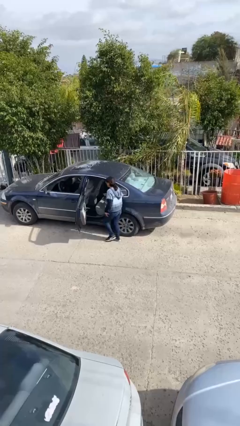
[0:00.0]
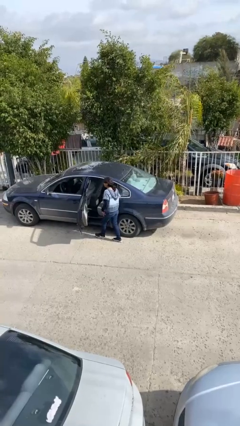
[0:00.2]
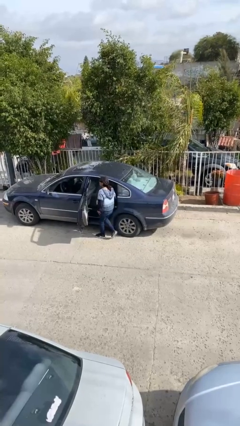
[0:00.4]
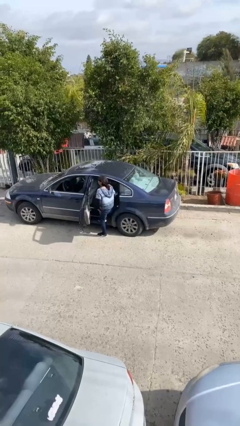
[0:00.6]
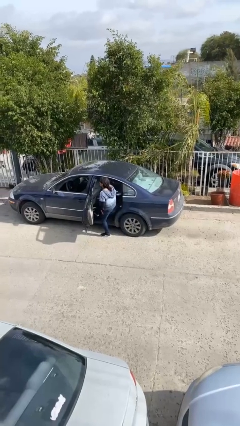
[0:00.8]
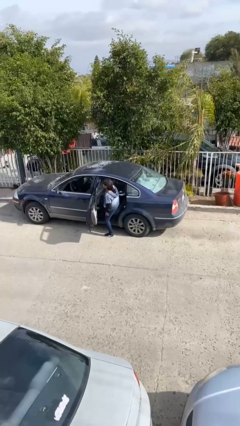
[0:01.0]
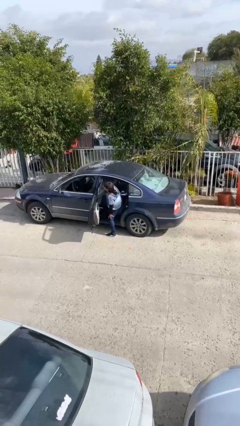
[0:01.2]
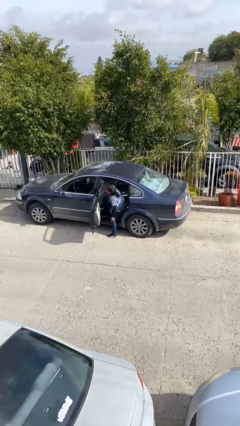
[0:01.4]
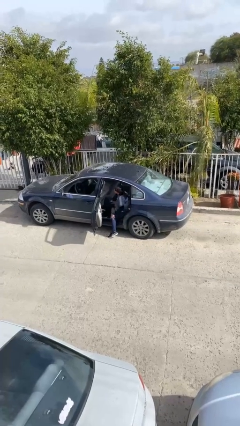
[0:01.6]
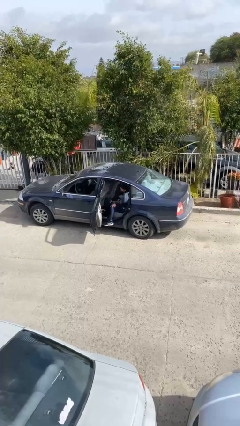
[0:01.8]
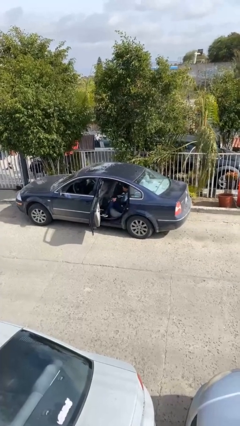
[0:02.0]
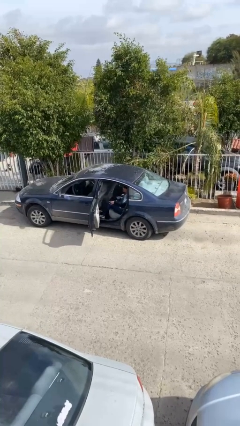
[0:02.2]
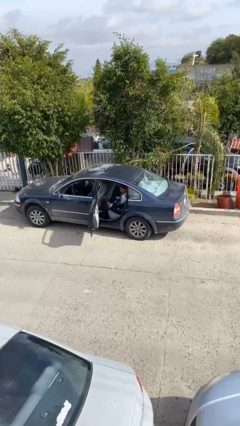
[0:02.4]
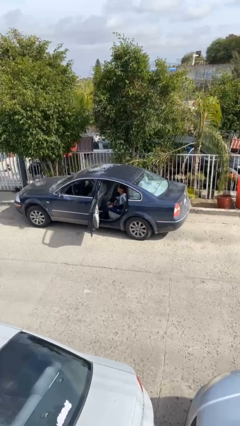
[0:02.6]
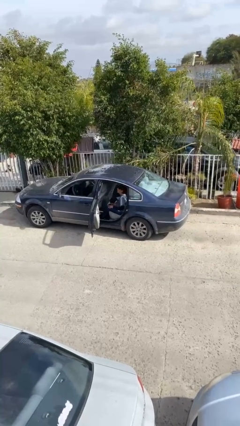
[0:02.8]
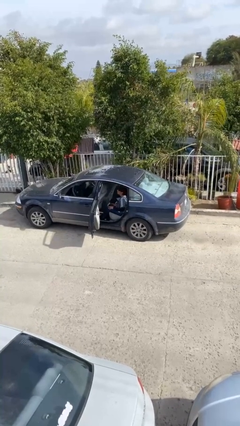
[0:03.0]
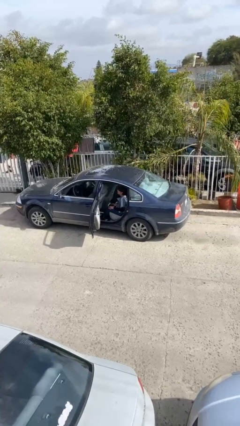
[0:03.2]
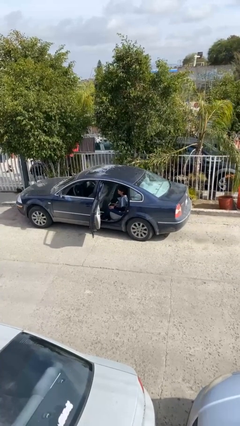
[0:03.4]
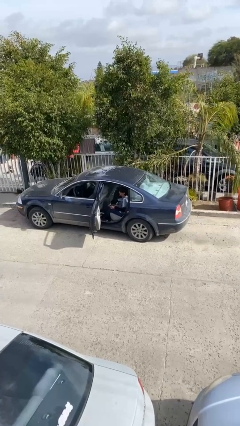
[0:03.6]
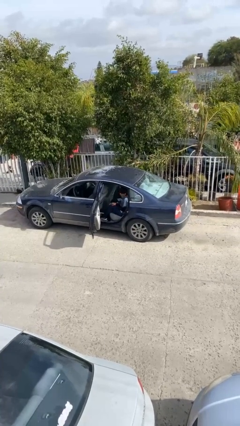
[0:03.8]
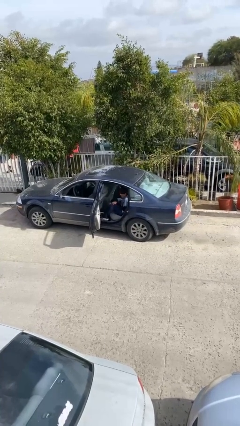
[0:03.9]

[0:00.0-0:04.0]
person enters car

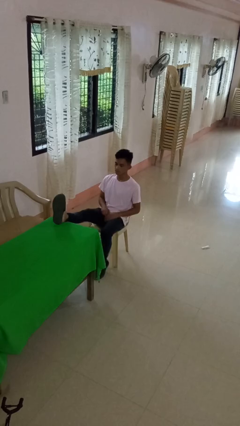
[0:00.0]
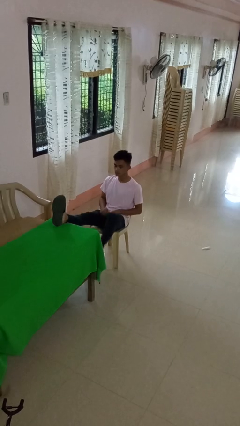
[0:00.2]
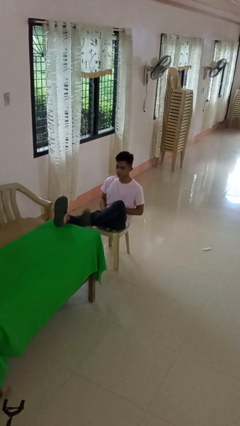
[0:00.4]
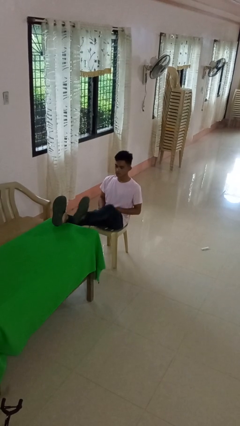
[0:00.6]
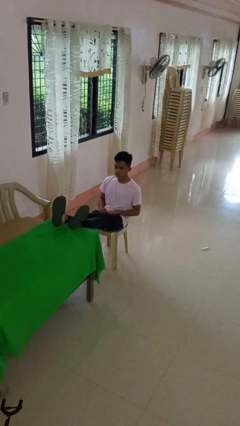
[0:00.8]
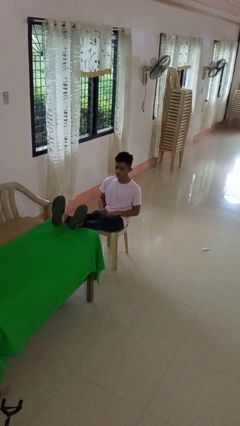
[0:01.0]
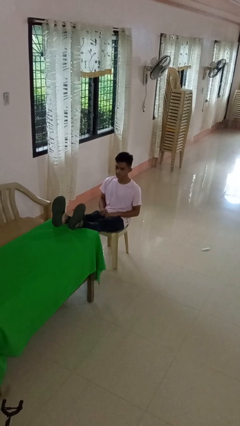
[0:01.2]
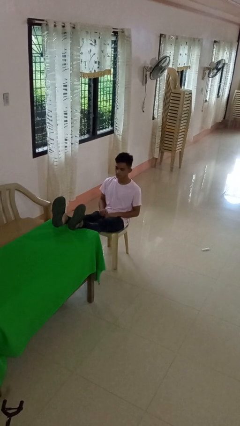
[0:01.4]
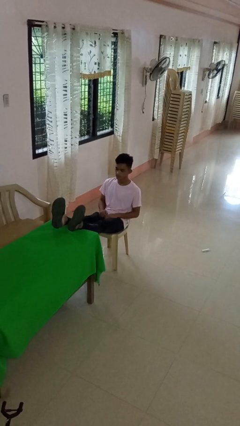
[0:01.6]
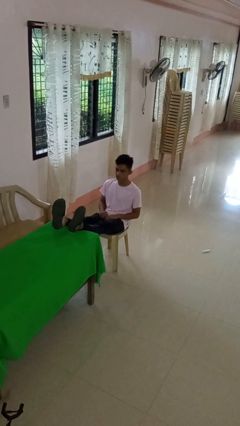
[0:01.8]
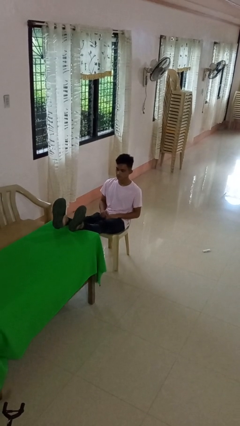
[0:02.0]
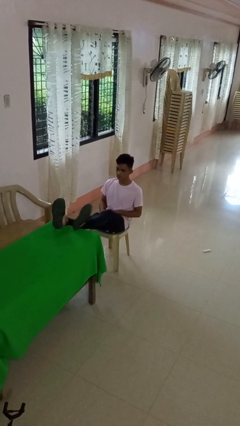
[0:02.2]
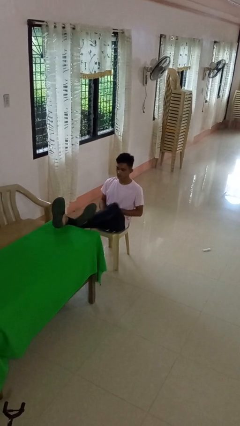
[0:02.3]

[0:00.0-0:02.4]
person puts feet up

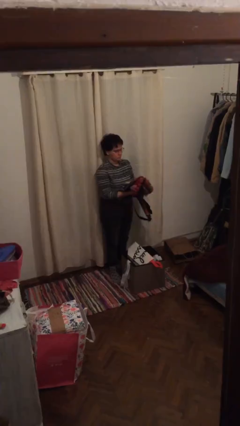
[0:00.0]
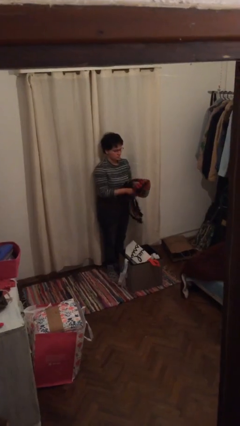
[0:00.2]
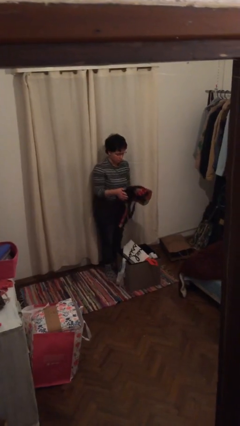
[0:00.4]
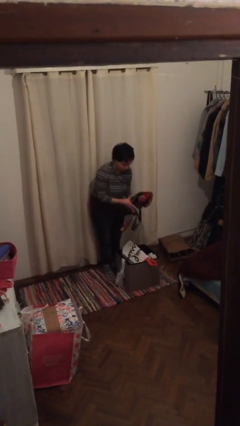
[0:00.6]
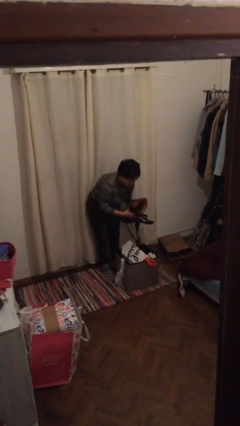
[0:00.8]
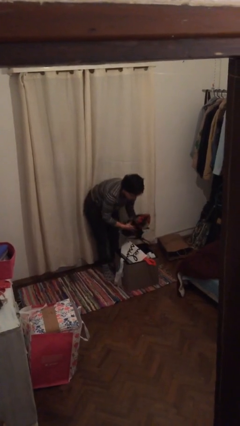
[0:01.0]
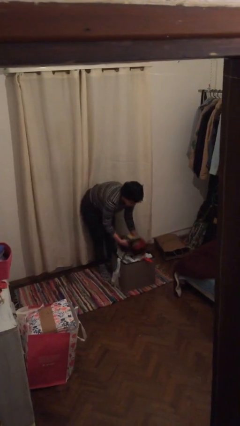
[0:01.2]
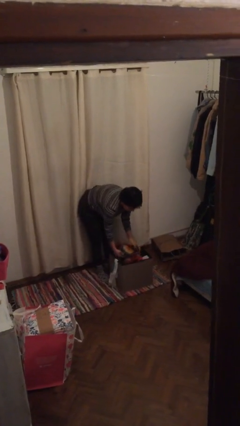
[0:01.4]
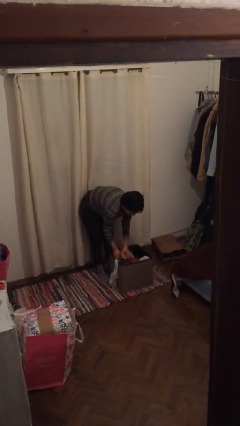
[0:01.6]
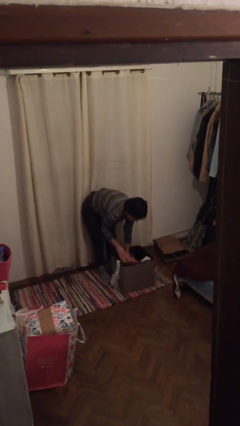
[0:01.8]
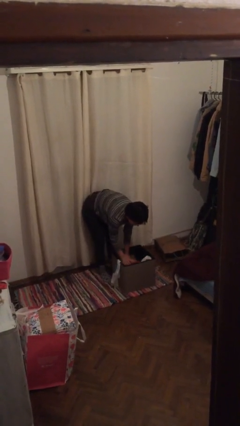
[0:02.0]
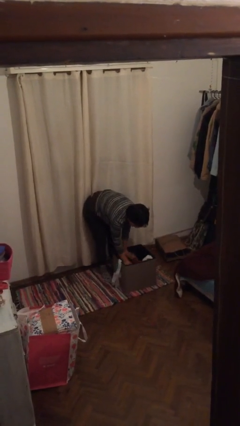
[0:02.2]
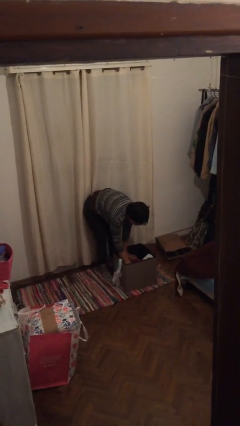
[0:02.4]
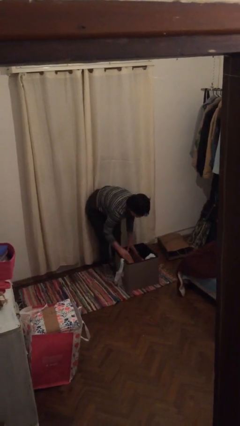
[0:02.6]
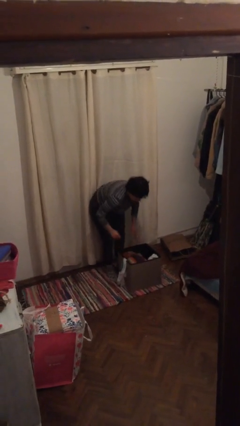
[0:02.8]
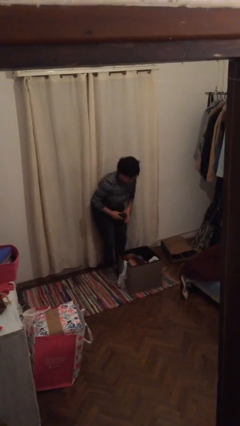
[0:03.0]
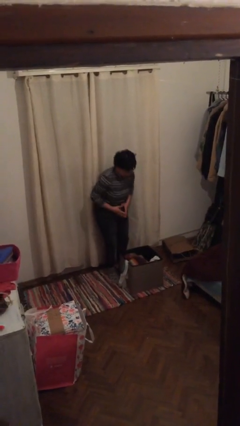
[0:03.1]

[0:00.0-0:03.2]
person puts object into basket

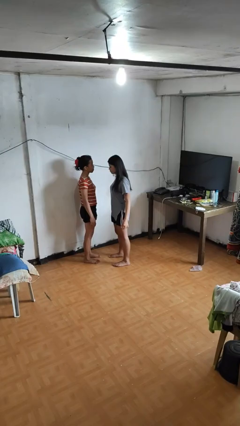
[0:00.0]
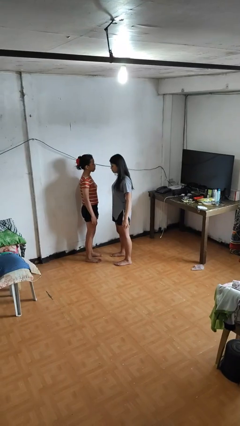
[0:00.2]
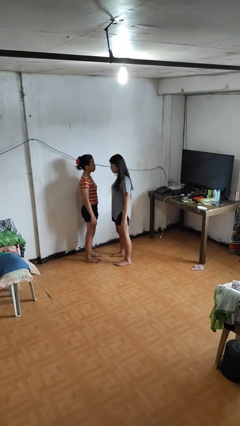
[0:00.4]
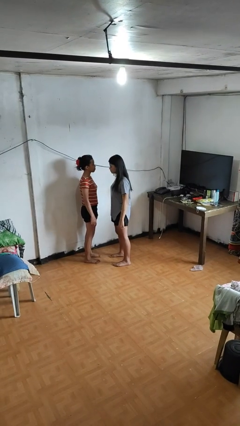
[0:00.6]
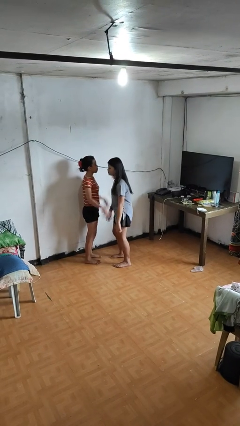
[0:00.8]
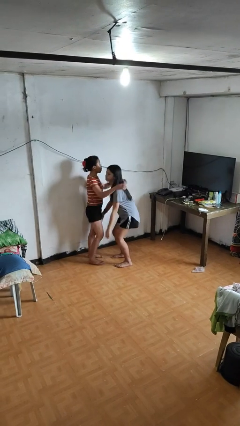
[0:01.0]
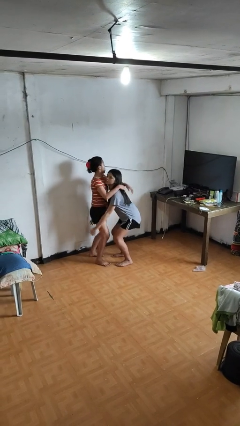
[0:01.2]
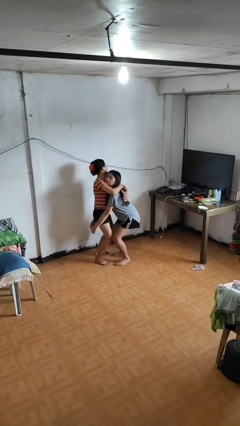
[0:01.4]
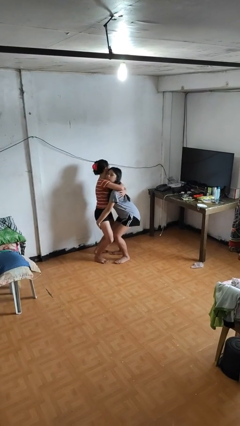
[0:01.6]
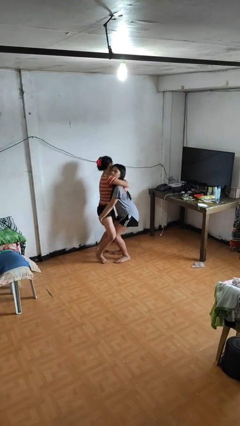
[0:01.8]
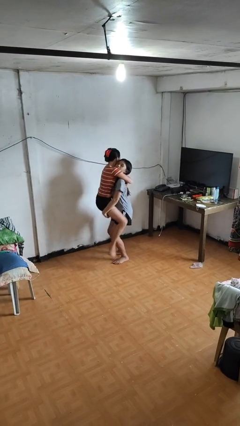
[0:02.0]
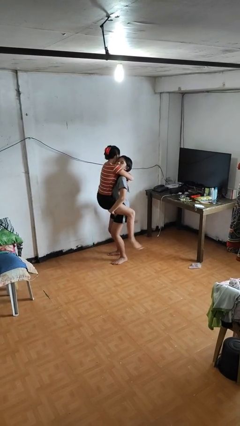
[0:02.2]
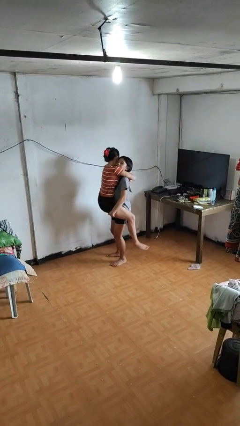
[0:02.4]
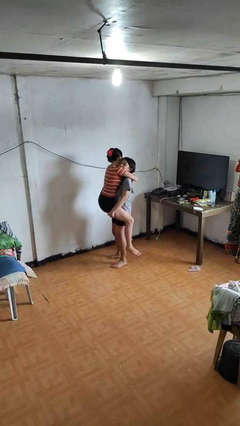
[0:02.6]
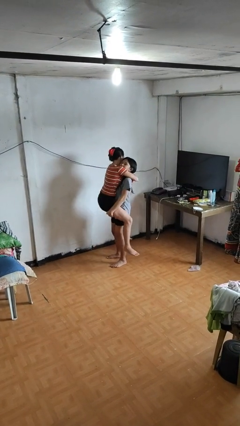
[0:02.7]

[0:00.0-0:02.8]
person picks up person

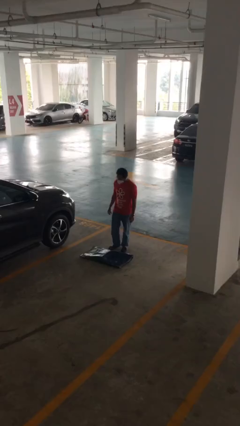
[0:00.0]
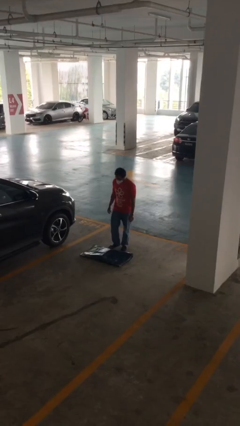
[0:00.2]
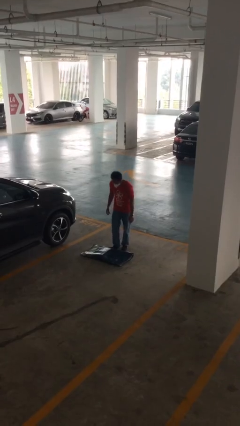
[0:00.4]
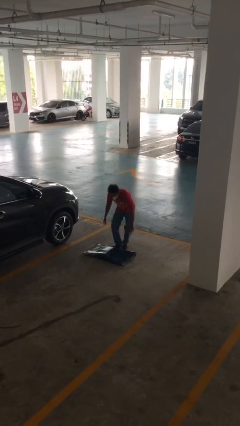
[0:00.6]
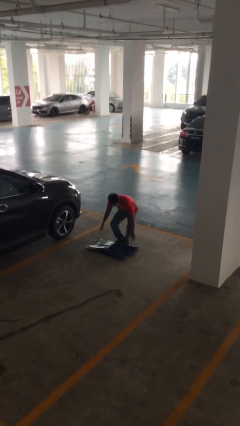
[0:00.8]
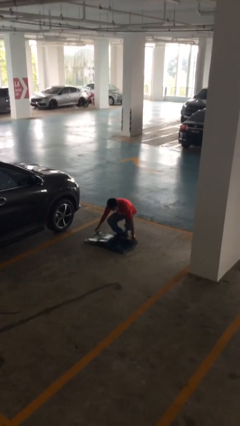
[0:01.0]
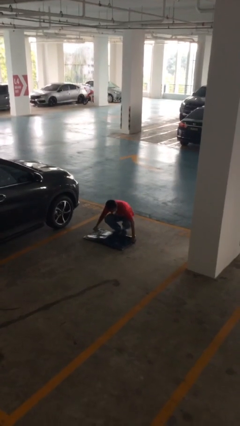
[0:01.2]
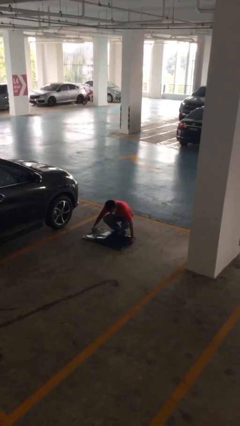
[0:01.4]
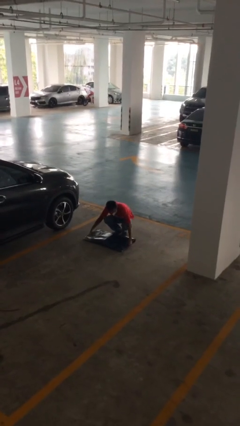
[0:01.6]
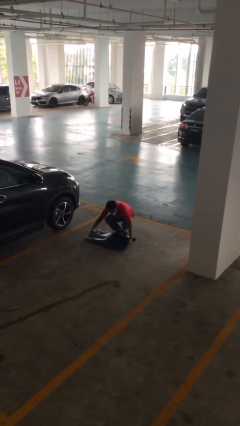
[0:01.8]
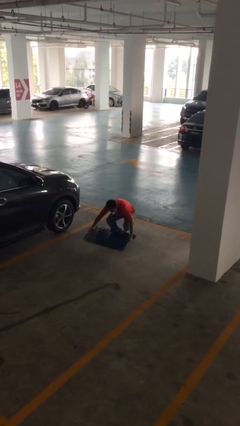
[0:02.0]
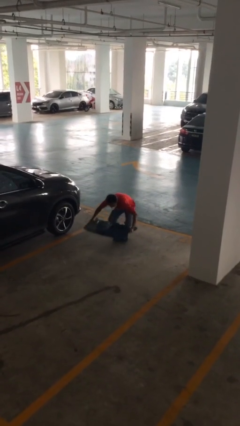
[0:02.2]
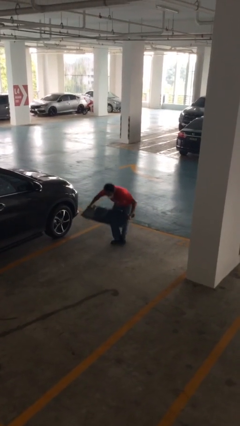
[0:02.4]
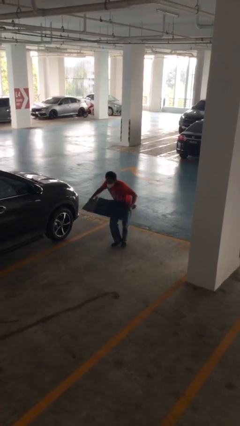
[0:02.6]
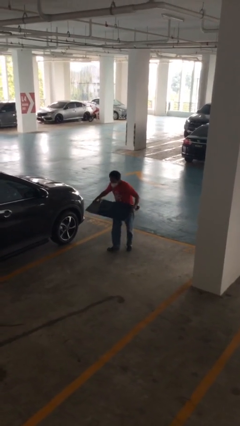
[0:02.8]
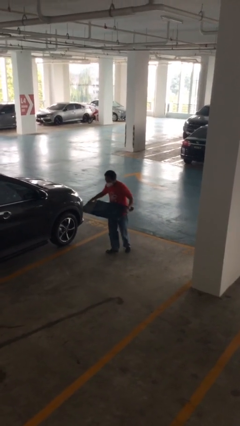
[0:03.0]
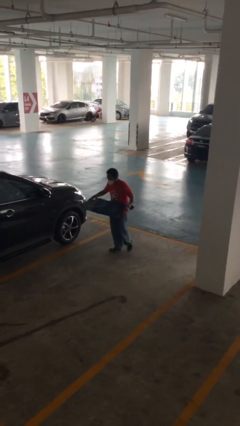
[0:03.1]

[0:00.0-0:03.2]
person picks up object from floor

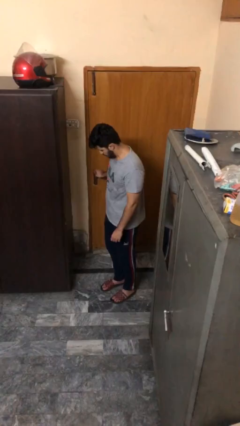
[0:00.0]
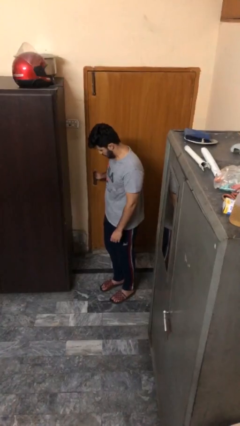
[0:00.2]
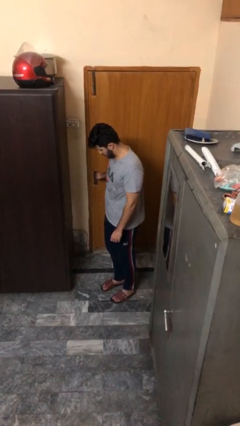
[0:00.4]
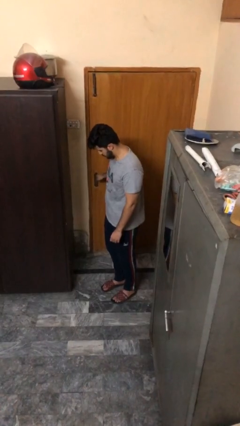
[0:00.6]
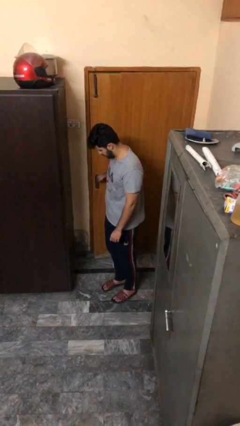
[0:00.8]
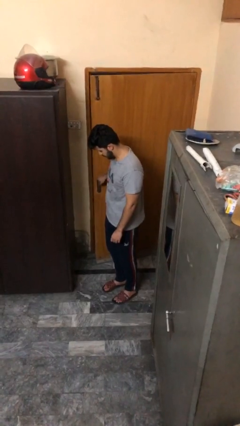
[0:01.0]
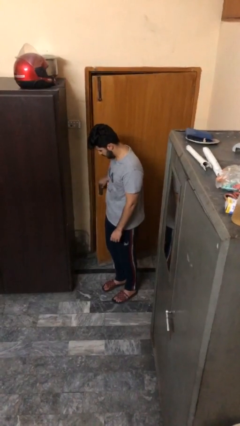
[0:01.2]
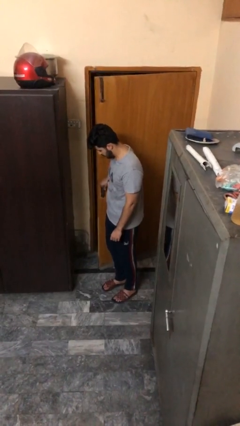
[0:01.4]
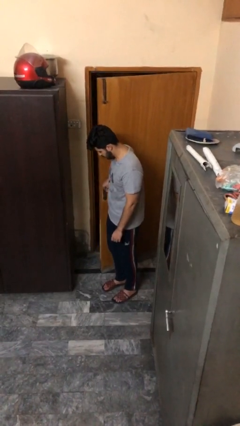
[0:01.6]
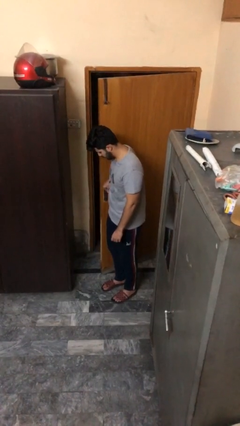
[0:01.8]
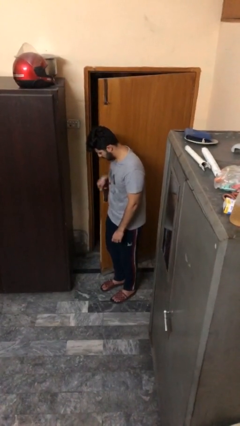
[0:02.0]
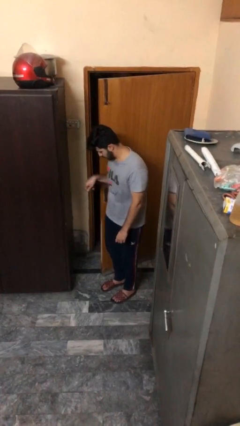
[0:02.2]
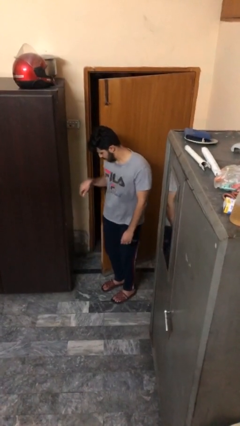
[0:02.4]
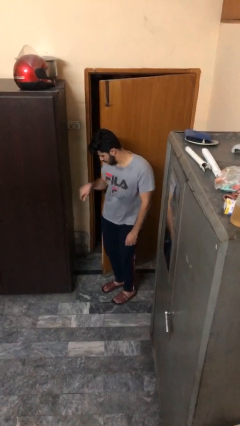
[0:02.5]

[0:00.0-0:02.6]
person opens facility door
